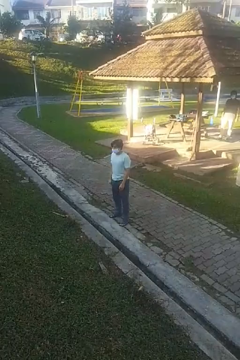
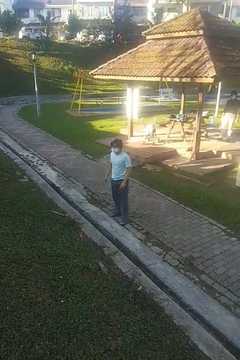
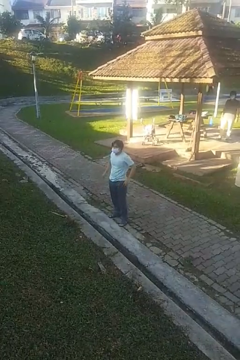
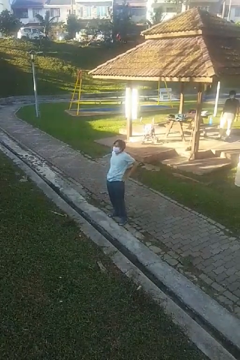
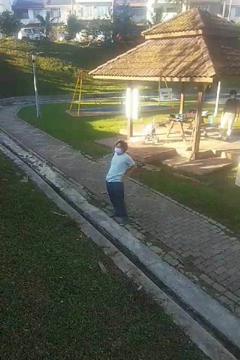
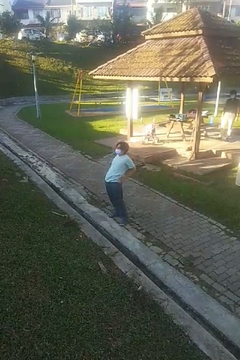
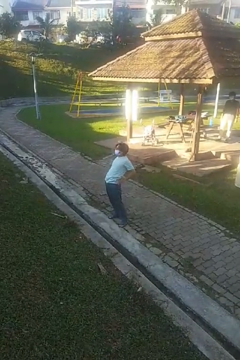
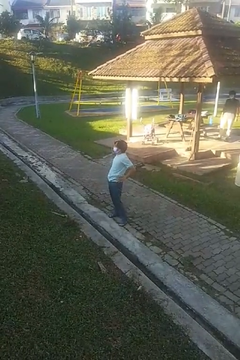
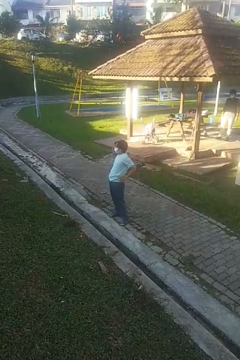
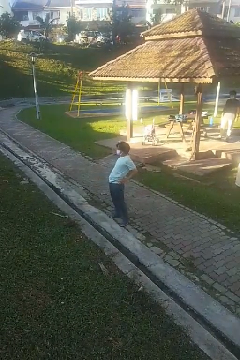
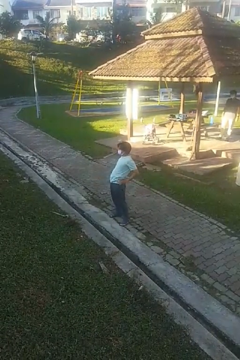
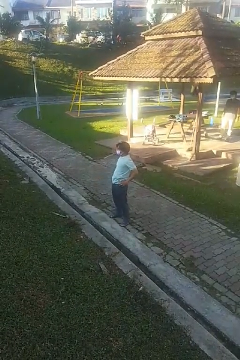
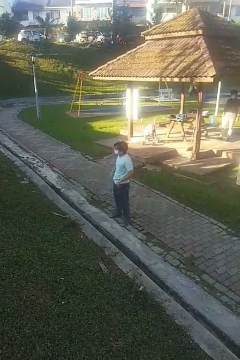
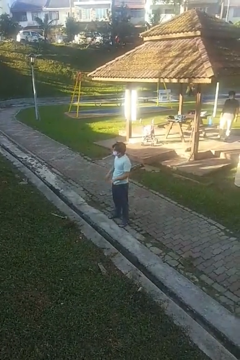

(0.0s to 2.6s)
person stretches back

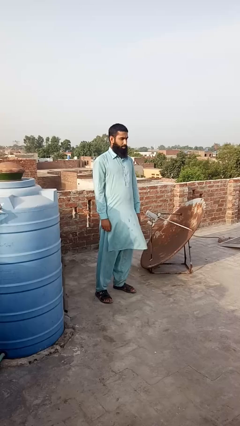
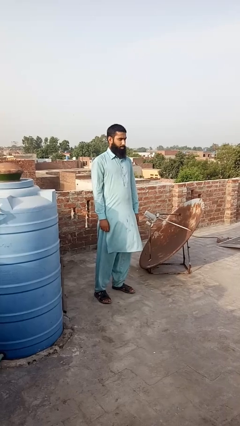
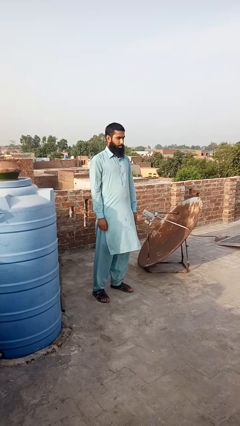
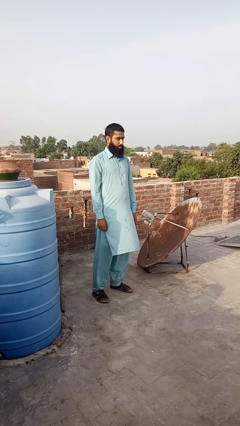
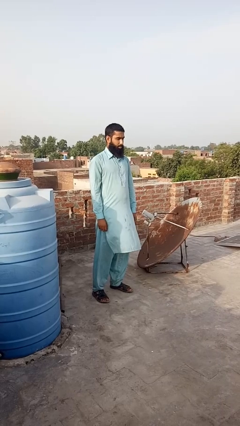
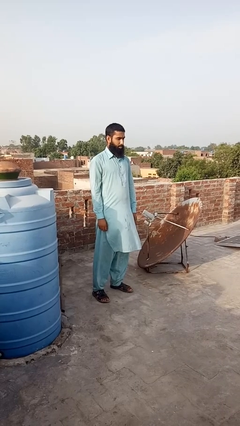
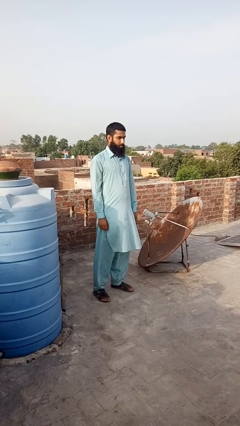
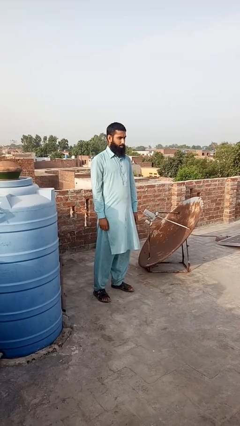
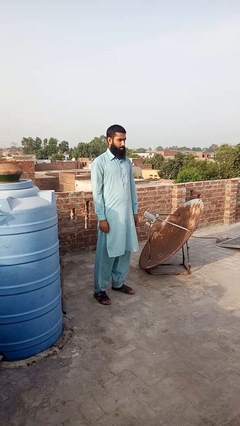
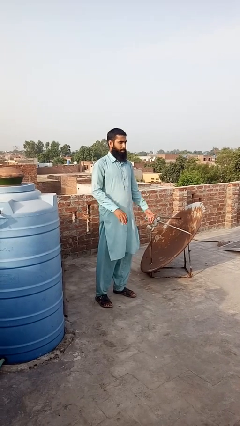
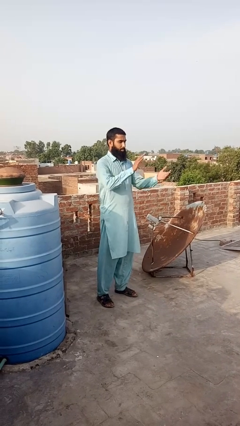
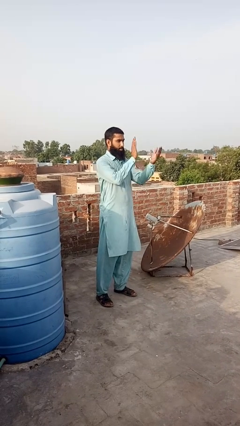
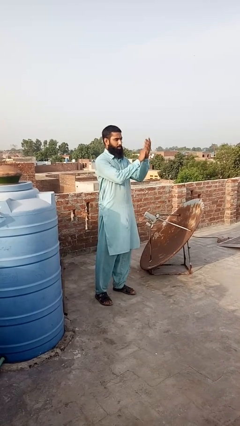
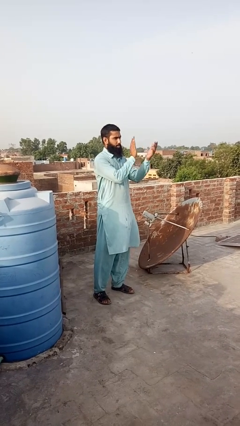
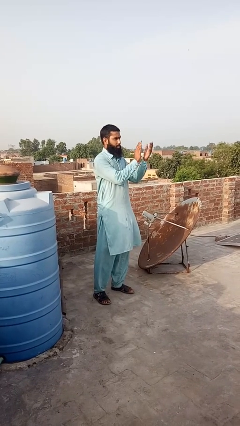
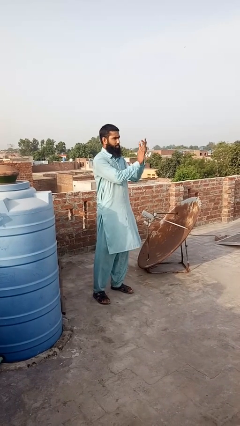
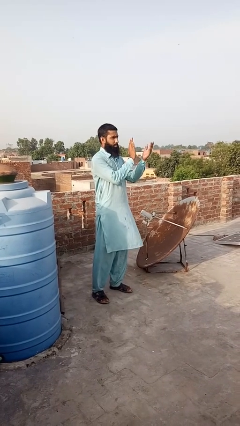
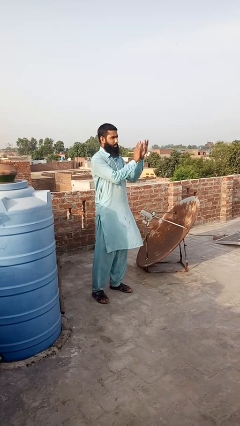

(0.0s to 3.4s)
person claps hands

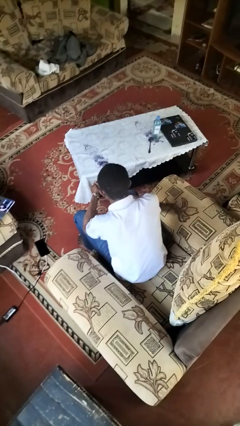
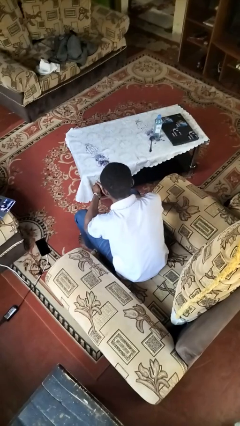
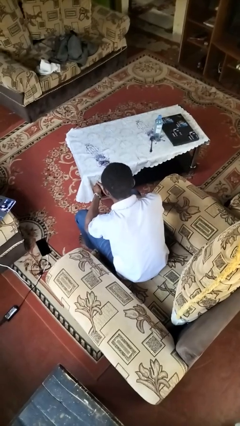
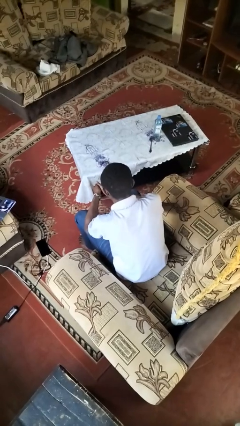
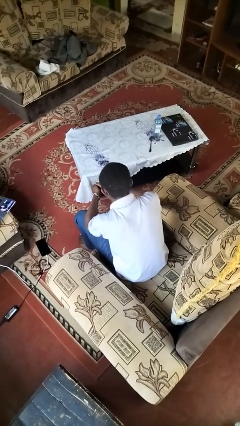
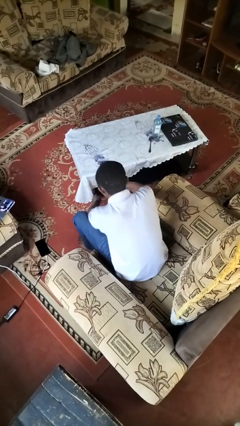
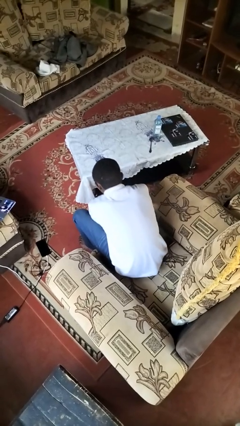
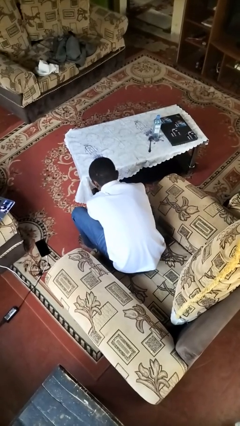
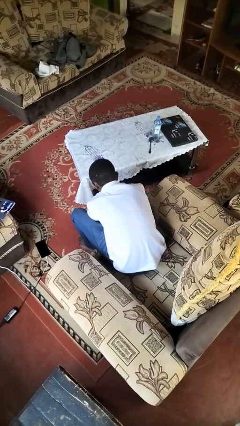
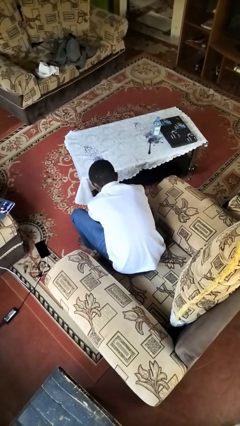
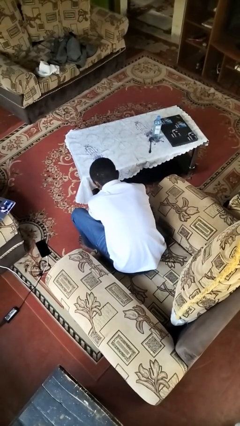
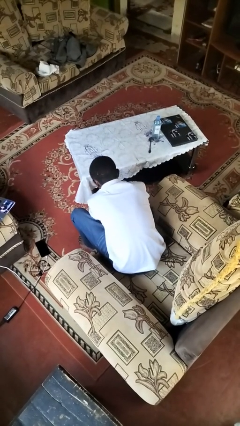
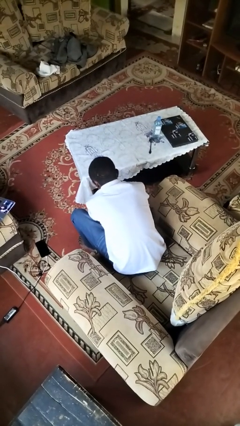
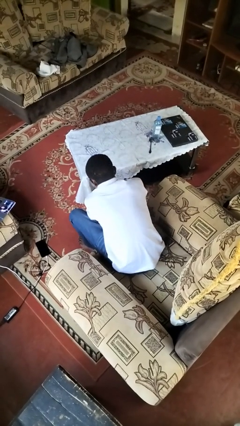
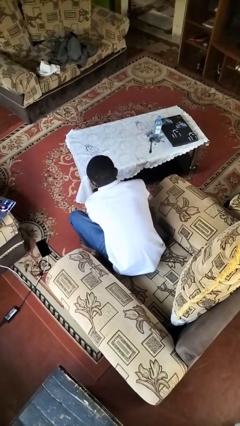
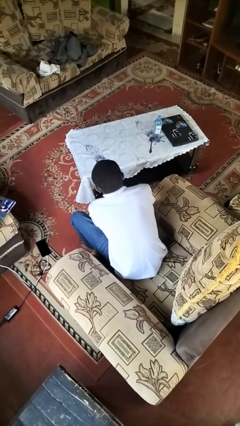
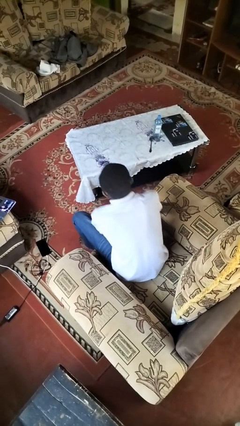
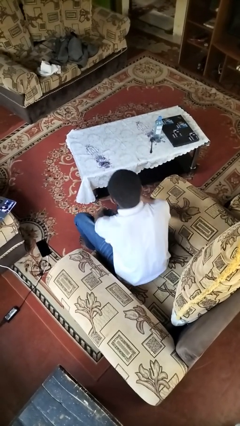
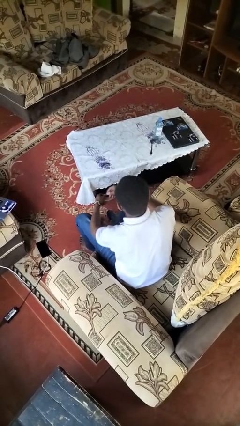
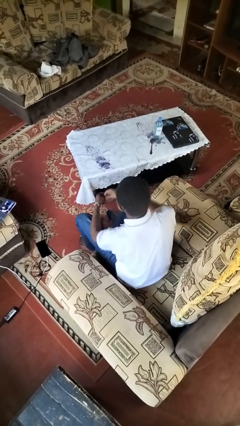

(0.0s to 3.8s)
person puts on socks

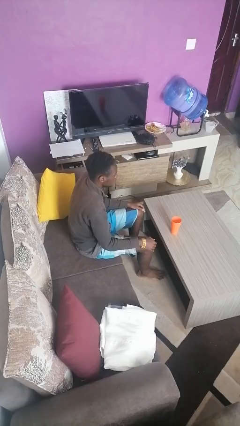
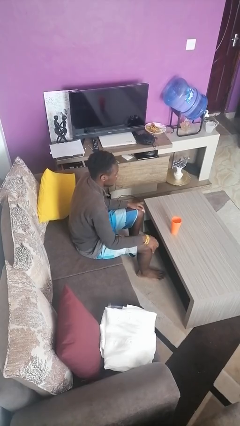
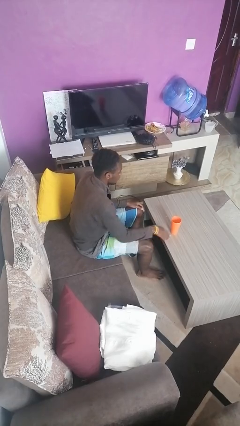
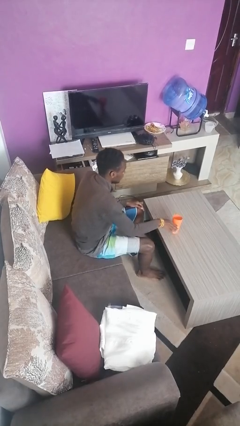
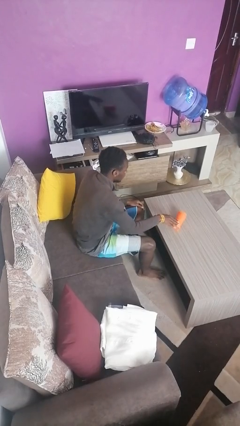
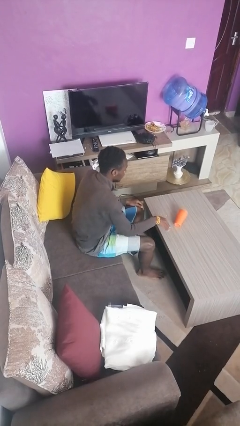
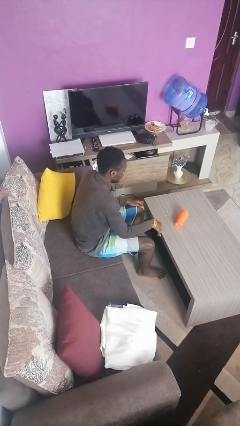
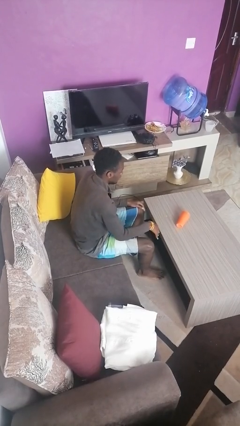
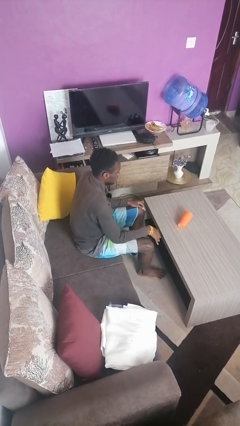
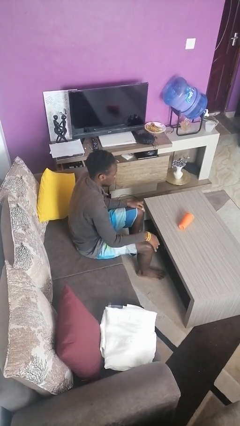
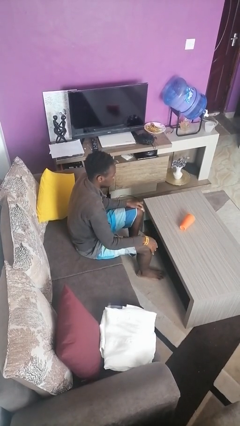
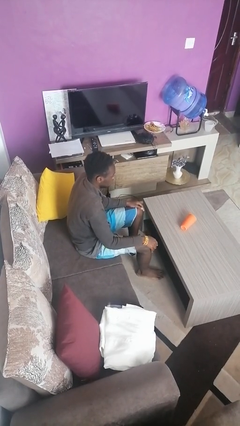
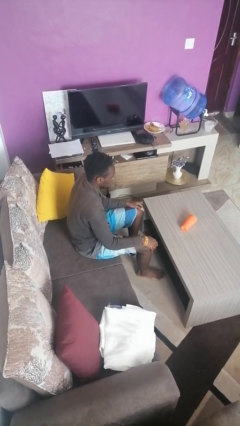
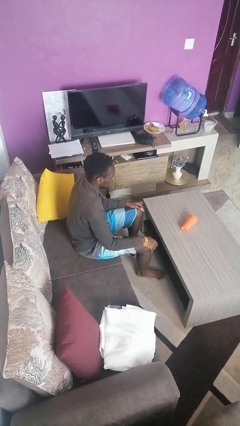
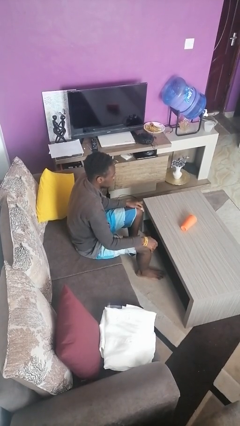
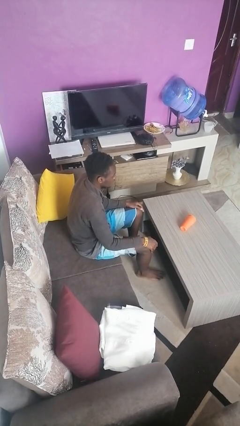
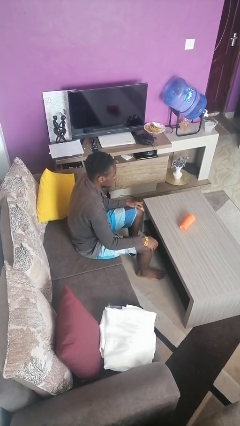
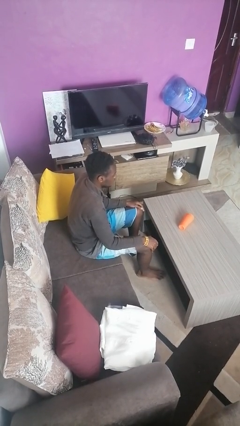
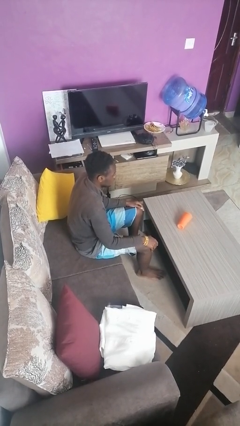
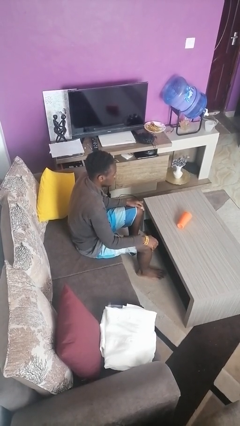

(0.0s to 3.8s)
person knocks over glass

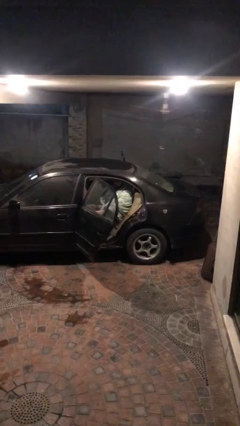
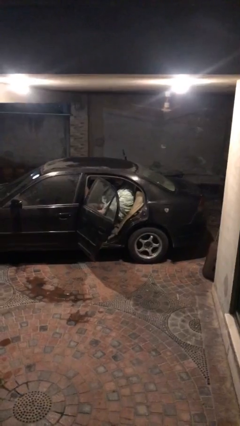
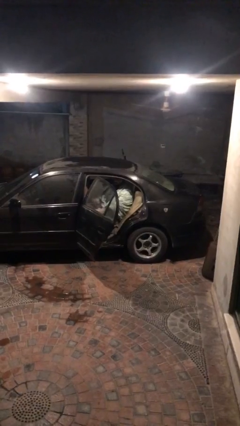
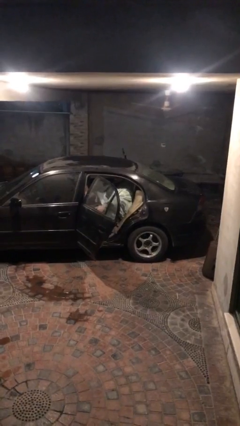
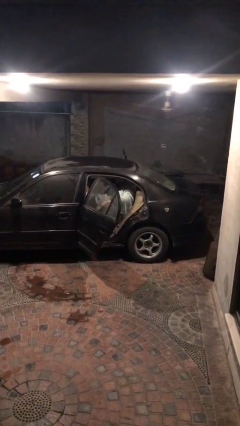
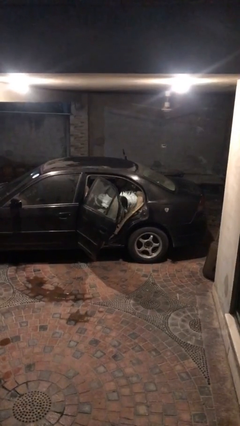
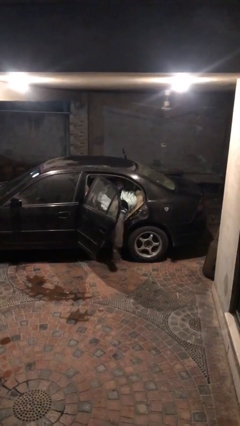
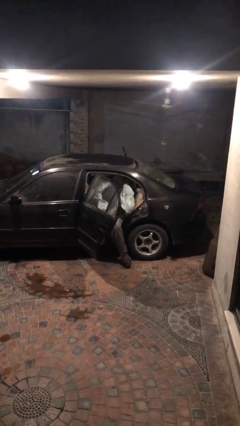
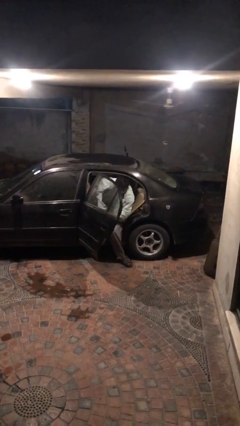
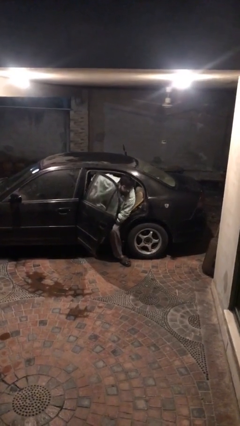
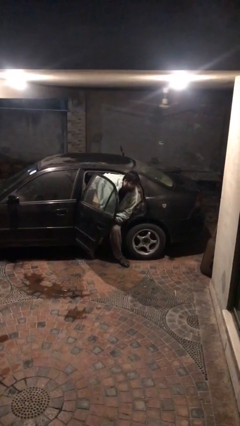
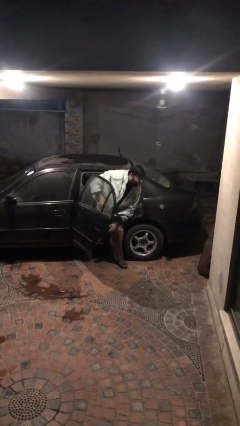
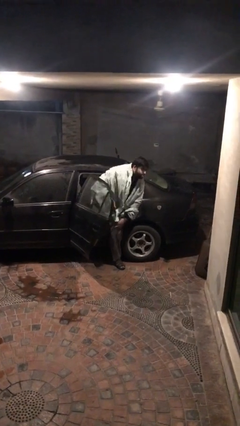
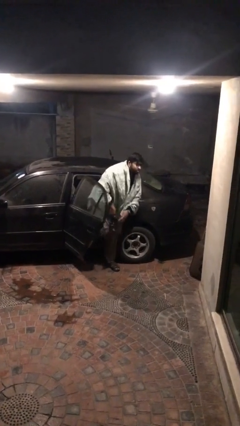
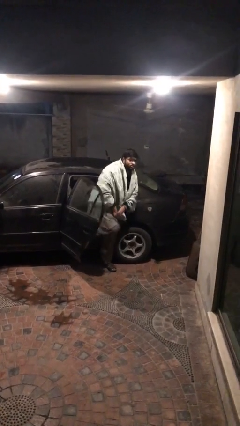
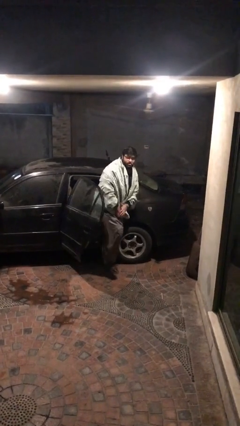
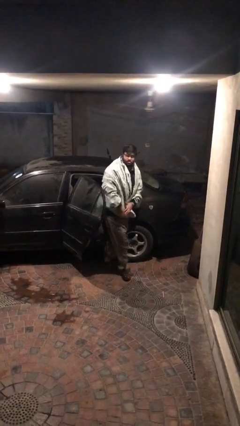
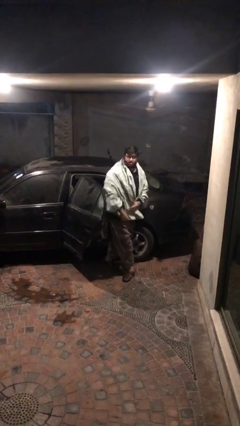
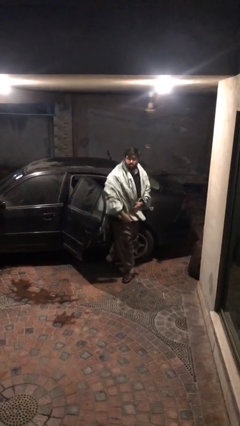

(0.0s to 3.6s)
person exits car

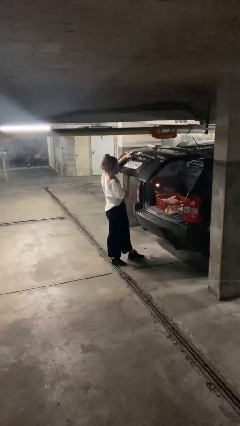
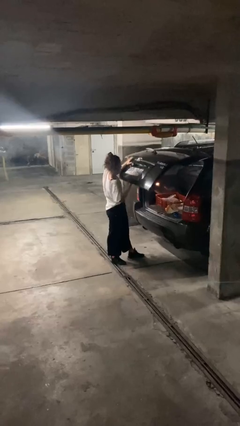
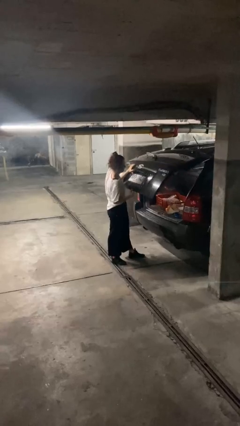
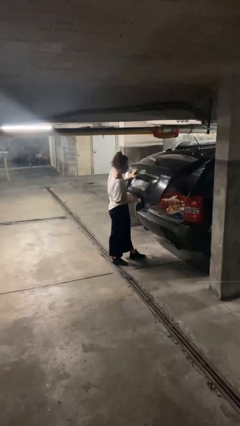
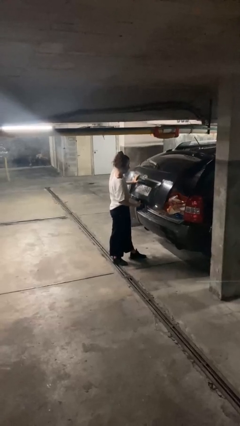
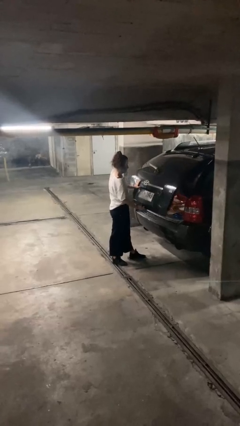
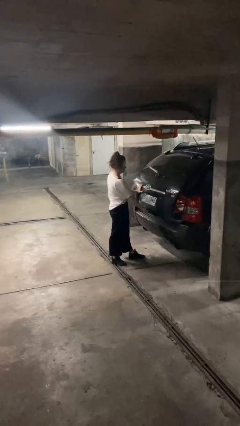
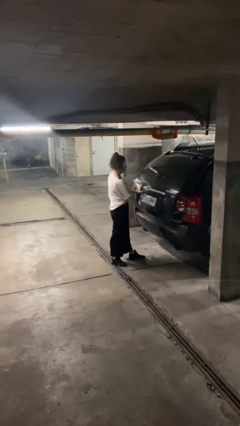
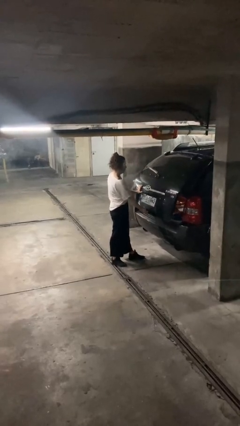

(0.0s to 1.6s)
person closes car trunk
